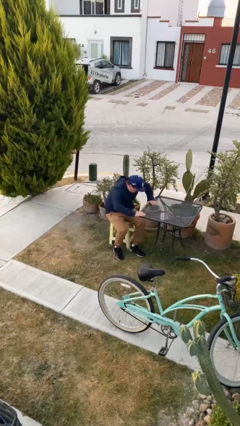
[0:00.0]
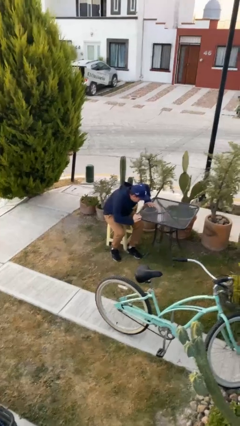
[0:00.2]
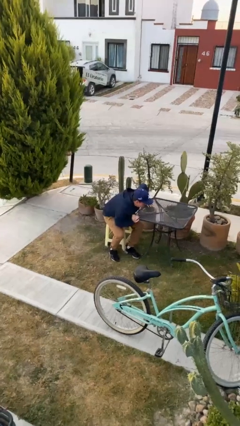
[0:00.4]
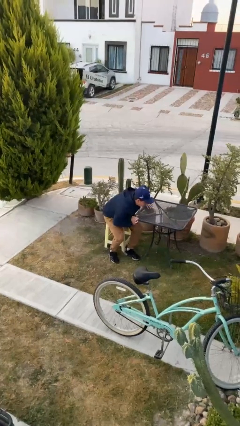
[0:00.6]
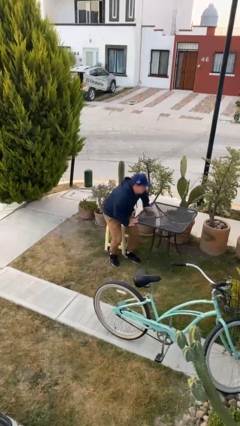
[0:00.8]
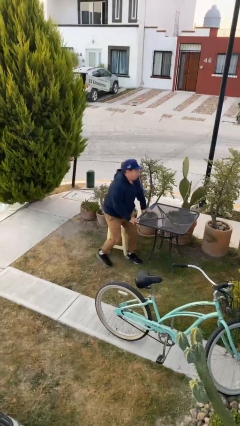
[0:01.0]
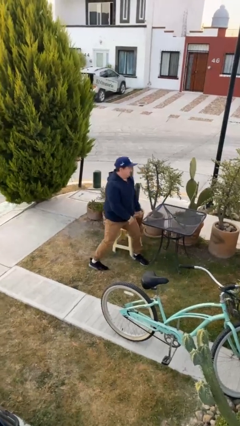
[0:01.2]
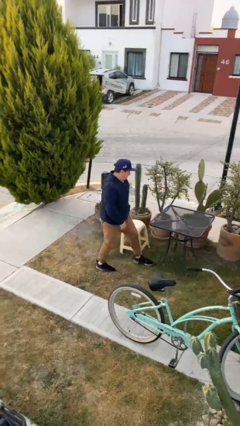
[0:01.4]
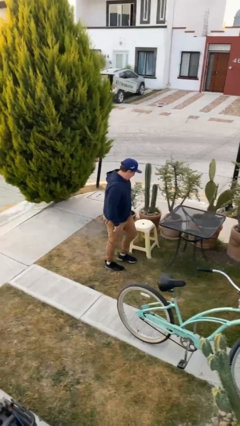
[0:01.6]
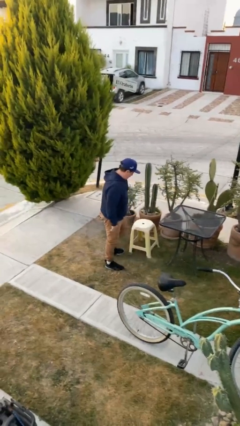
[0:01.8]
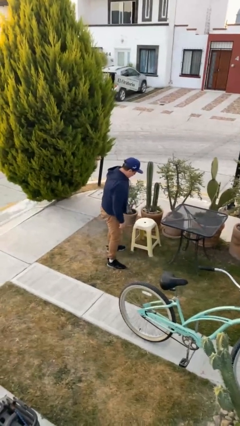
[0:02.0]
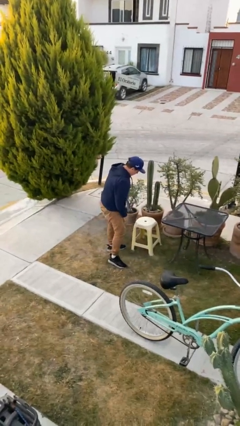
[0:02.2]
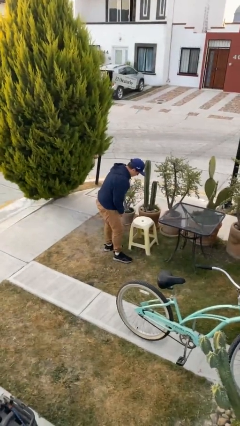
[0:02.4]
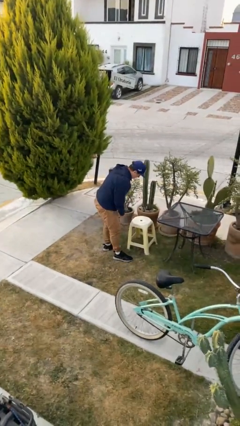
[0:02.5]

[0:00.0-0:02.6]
person stands up

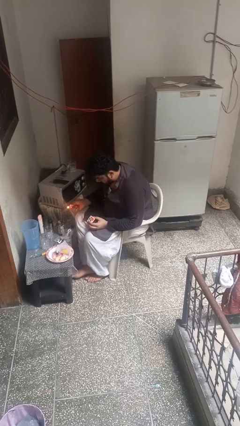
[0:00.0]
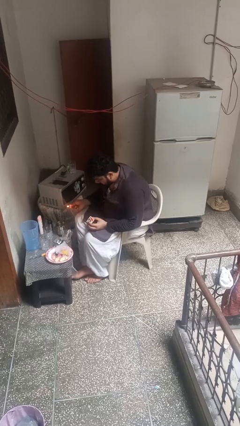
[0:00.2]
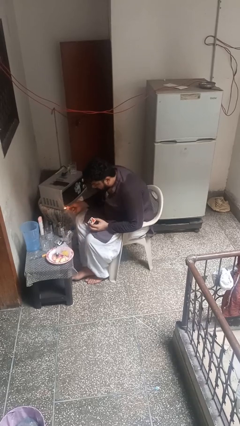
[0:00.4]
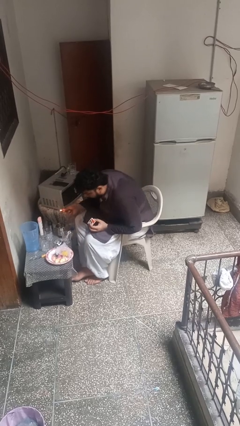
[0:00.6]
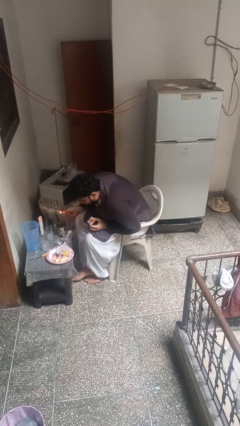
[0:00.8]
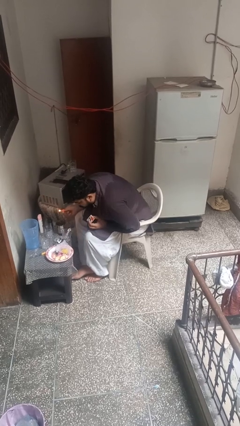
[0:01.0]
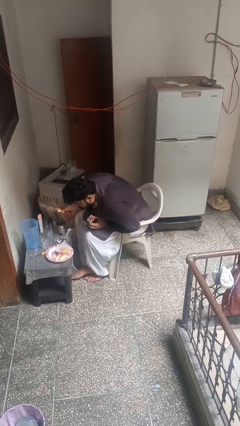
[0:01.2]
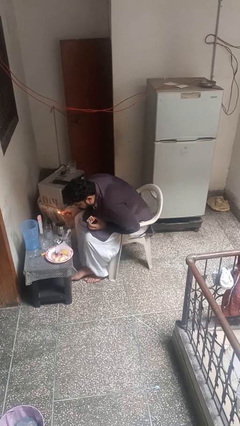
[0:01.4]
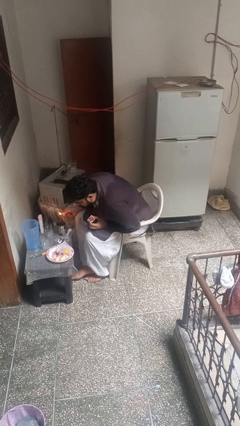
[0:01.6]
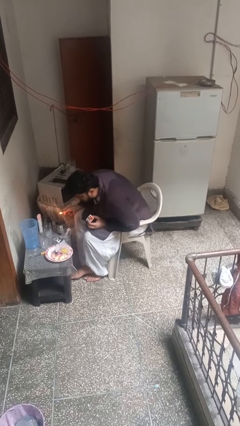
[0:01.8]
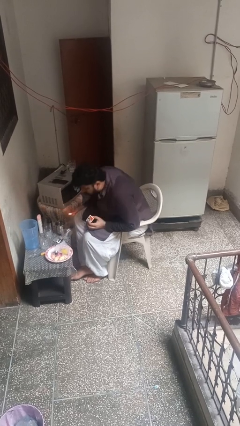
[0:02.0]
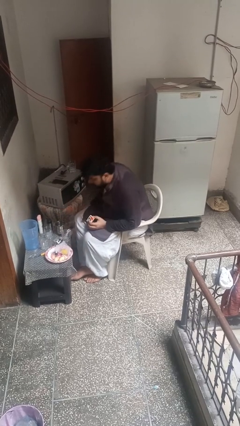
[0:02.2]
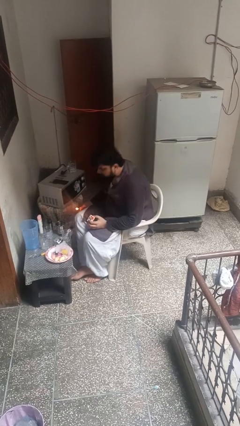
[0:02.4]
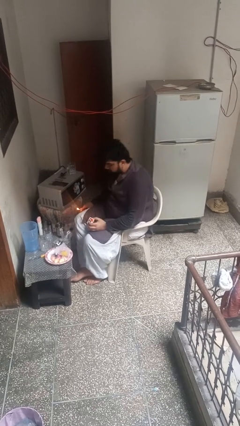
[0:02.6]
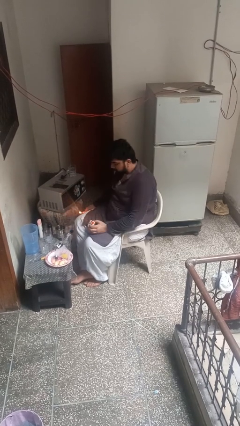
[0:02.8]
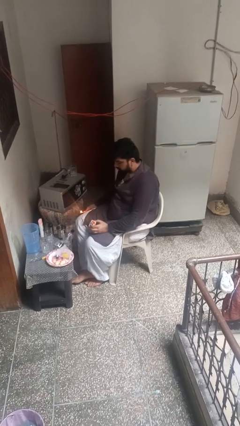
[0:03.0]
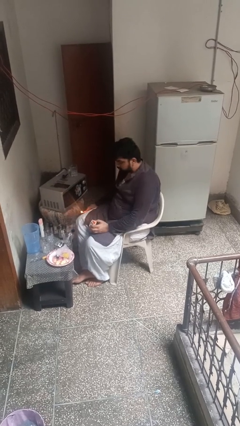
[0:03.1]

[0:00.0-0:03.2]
person extinguishes candle

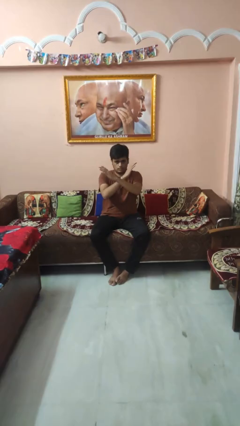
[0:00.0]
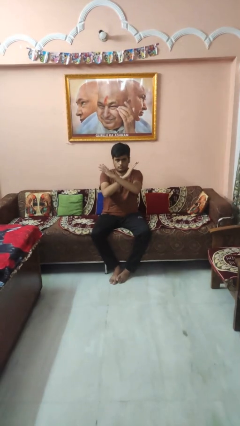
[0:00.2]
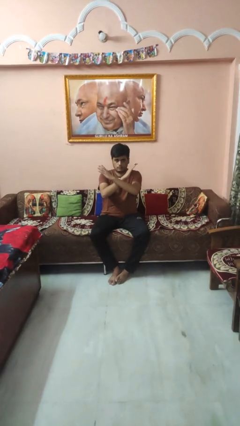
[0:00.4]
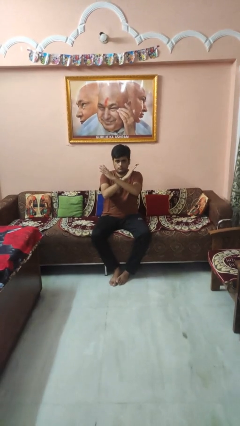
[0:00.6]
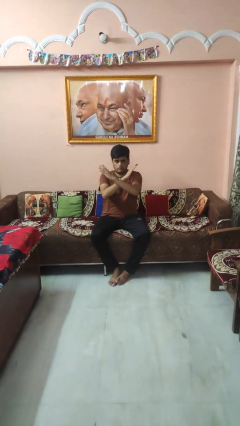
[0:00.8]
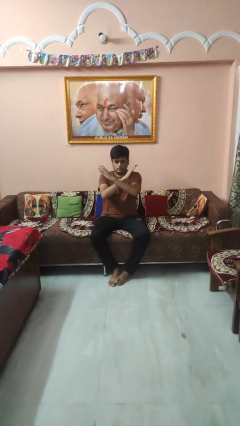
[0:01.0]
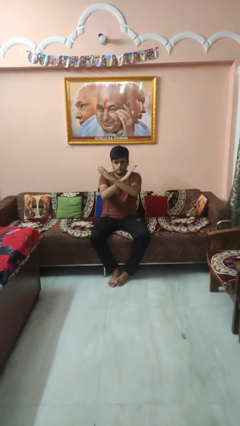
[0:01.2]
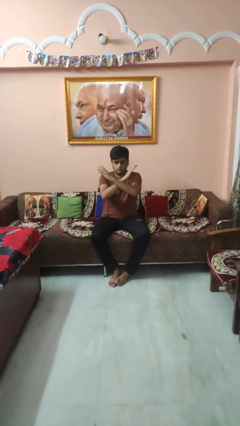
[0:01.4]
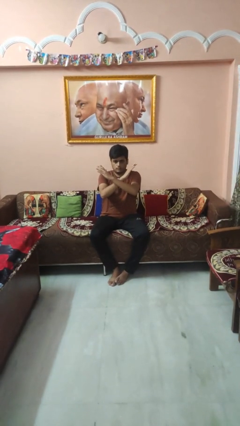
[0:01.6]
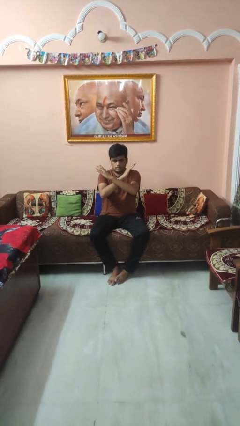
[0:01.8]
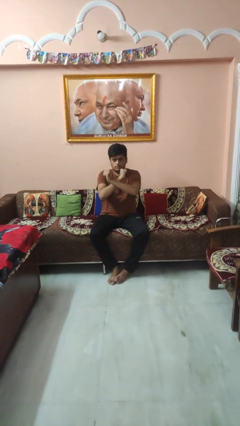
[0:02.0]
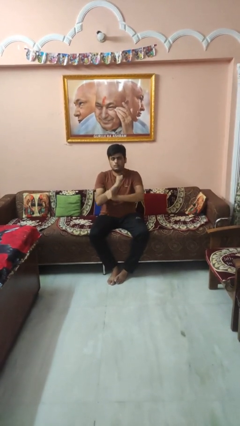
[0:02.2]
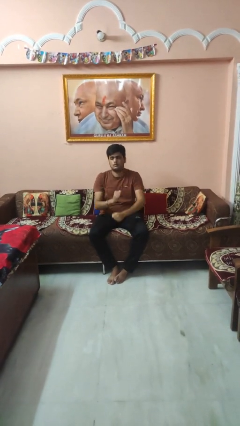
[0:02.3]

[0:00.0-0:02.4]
person gestures arms x

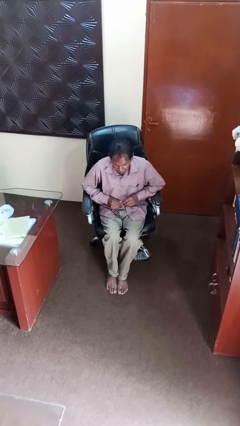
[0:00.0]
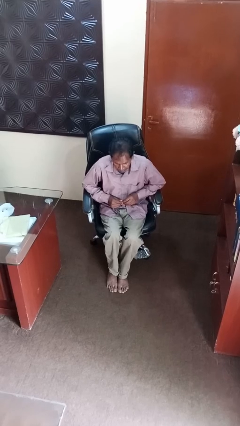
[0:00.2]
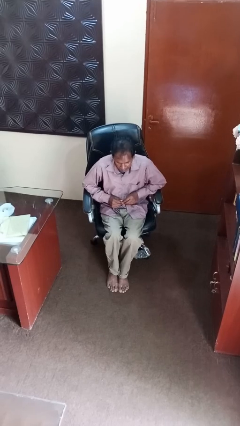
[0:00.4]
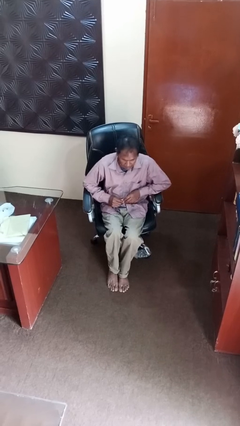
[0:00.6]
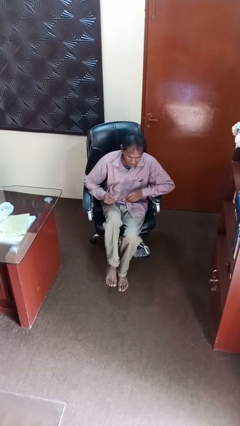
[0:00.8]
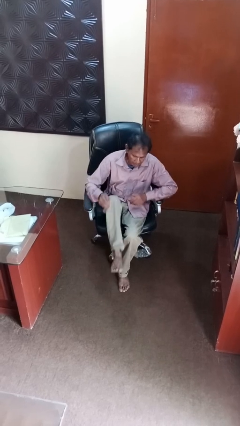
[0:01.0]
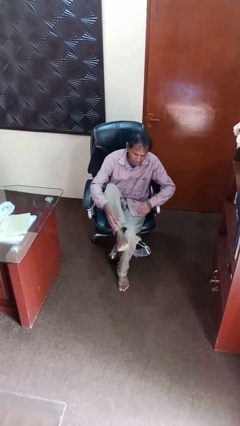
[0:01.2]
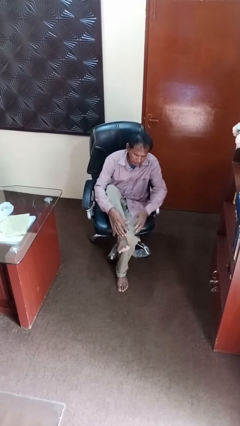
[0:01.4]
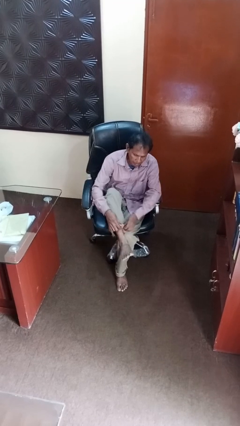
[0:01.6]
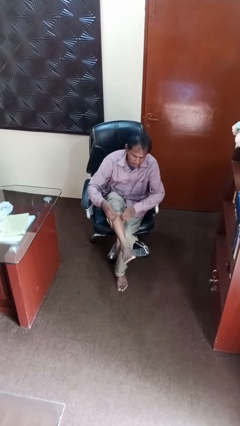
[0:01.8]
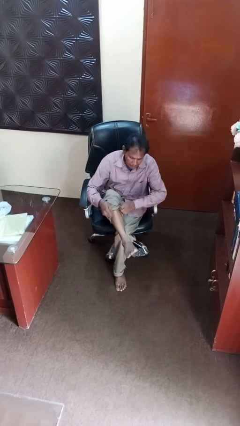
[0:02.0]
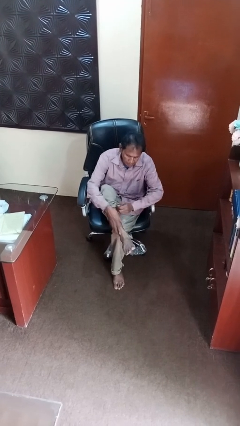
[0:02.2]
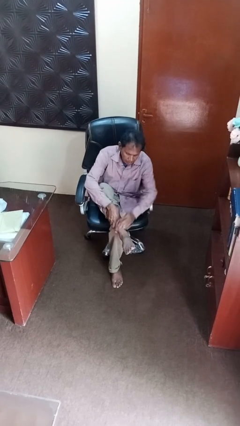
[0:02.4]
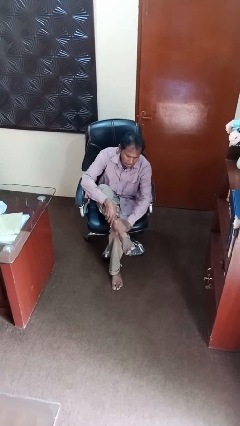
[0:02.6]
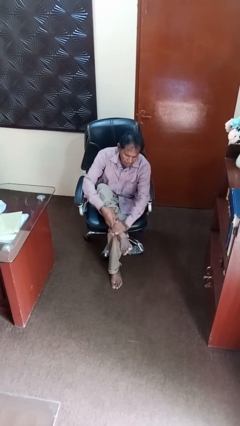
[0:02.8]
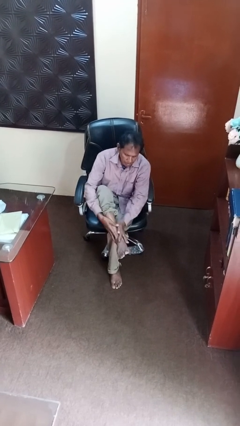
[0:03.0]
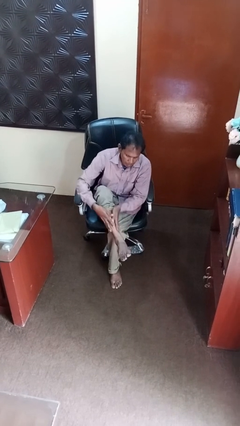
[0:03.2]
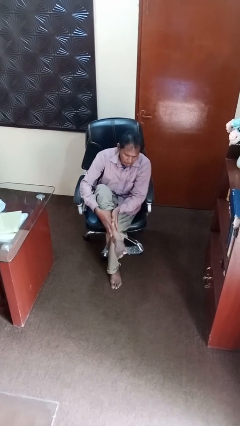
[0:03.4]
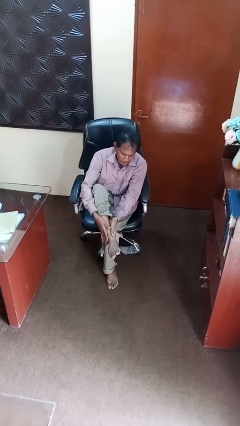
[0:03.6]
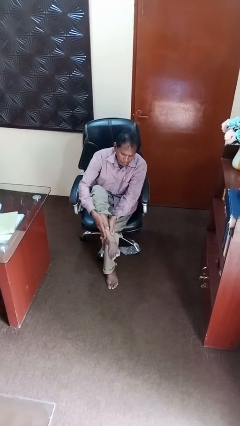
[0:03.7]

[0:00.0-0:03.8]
person rubs foot

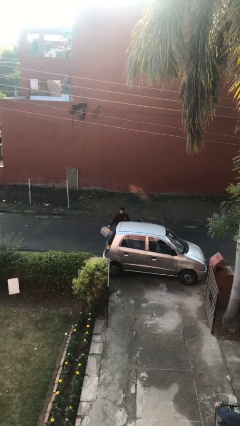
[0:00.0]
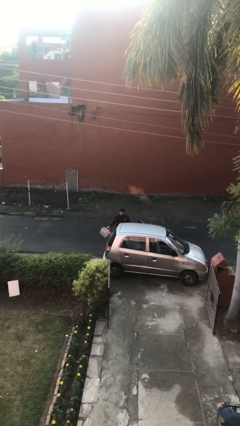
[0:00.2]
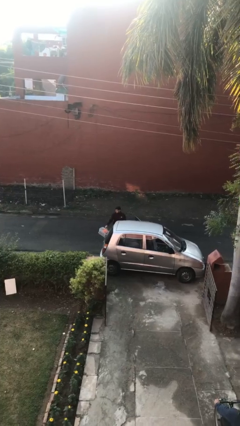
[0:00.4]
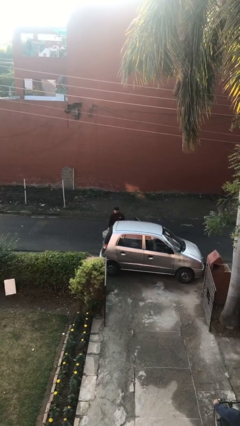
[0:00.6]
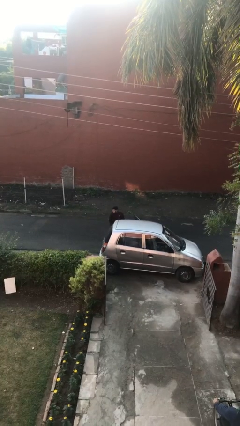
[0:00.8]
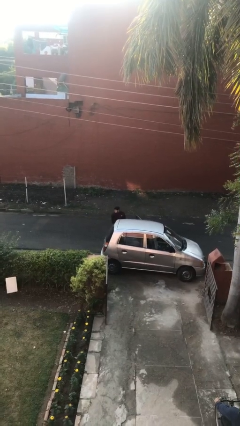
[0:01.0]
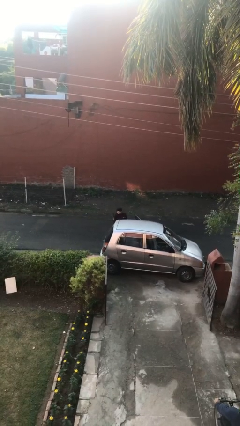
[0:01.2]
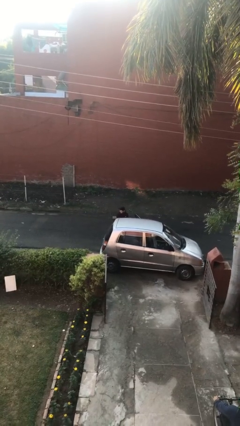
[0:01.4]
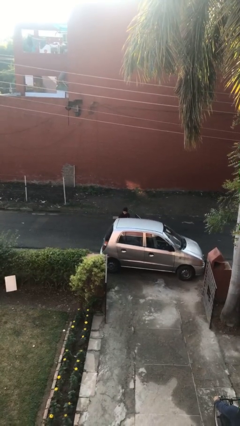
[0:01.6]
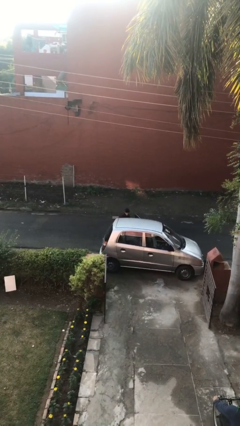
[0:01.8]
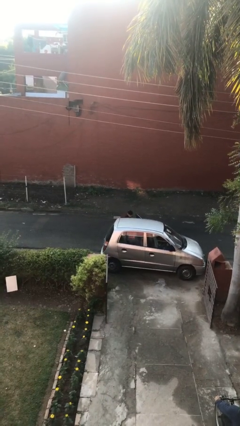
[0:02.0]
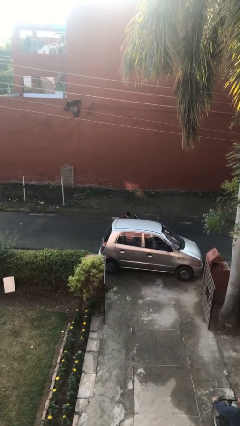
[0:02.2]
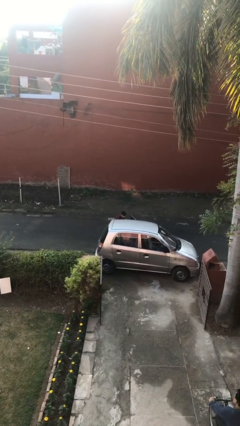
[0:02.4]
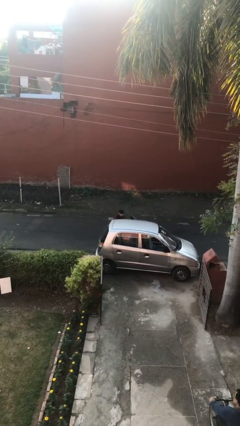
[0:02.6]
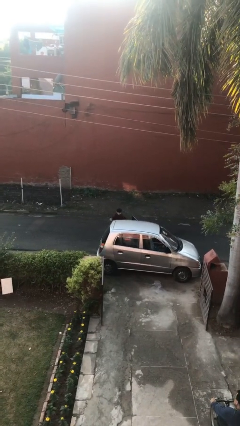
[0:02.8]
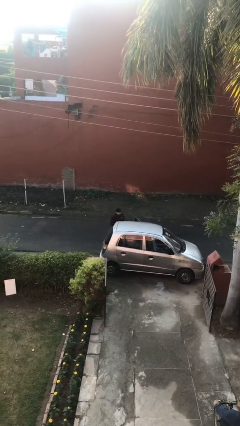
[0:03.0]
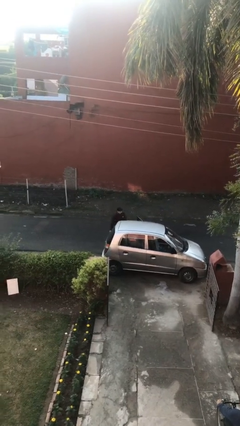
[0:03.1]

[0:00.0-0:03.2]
person loads car

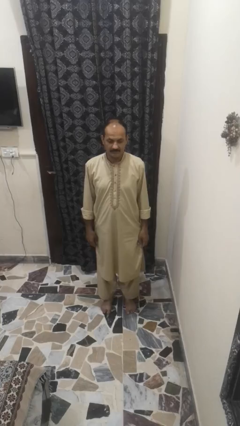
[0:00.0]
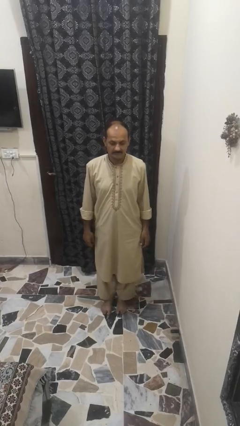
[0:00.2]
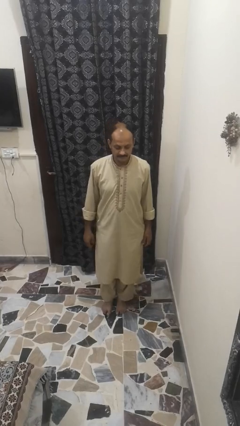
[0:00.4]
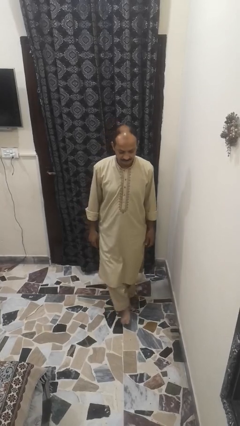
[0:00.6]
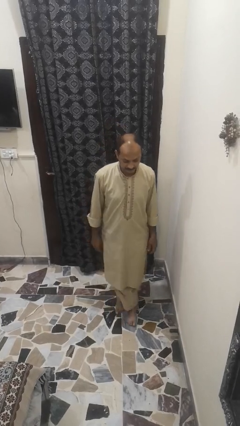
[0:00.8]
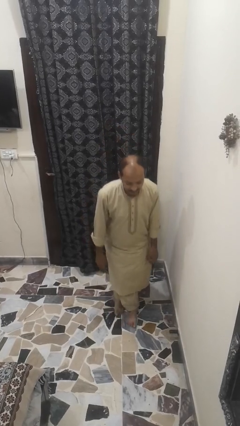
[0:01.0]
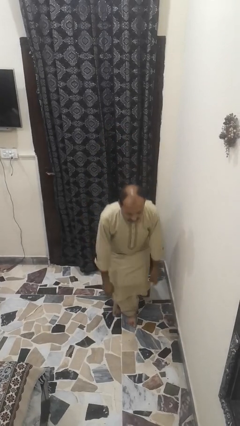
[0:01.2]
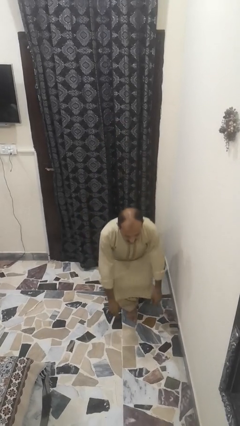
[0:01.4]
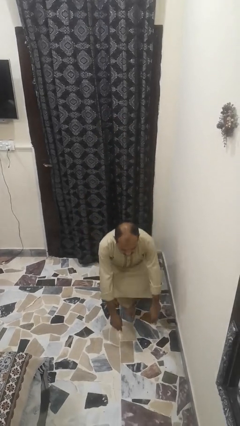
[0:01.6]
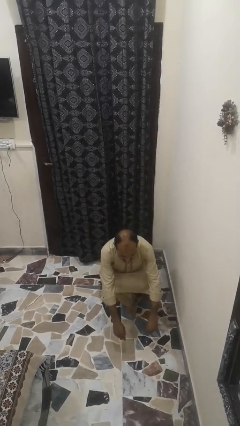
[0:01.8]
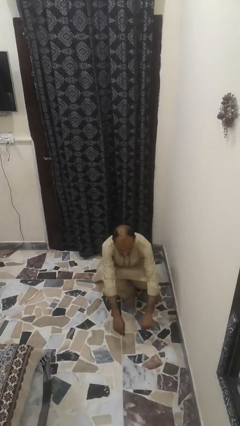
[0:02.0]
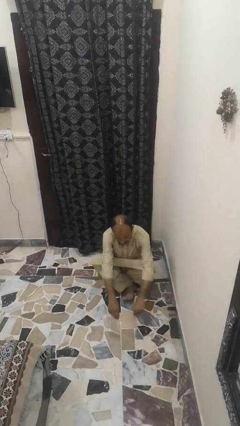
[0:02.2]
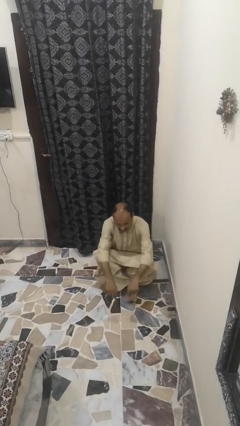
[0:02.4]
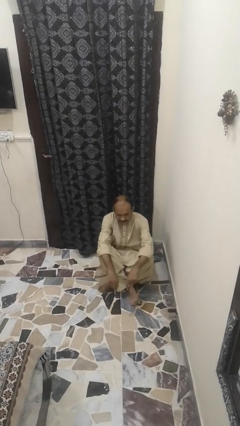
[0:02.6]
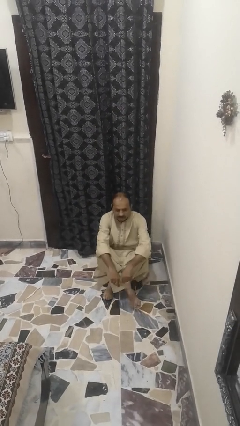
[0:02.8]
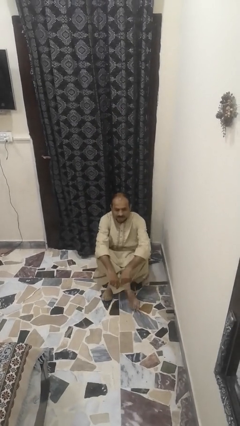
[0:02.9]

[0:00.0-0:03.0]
person reads newspaper
